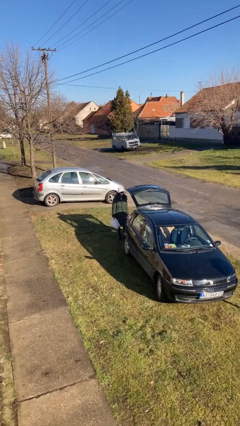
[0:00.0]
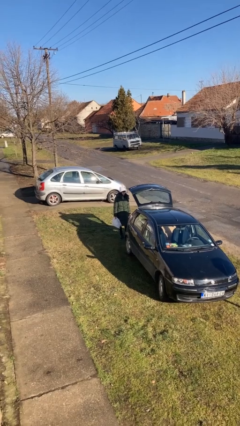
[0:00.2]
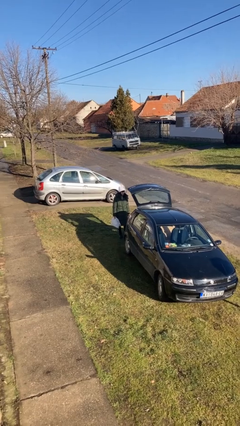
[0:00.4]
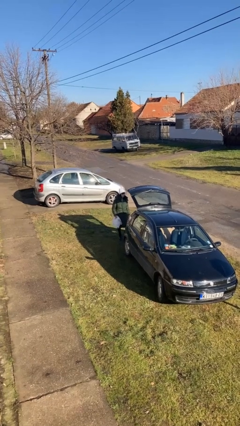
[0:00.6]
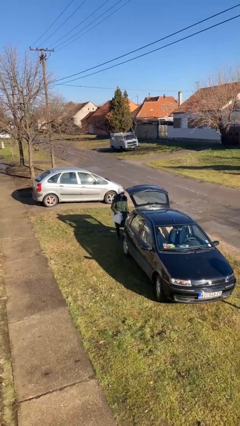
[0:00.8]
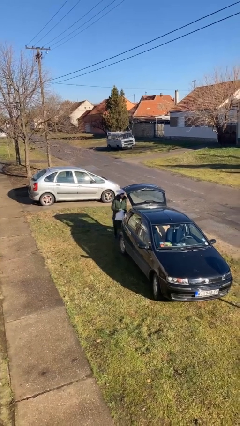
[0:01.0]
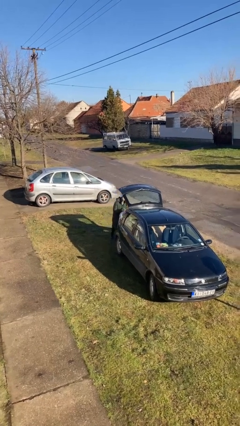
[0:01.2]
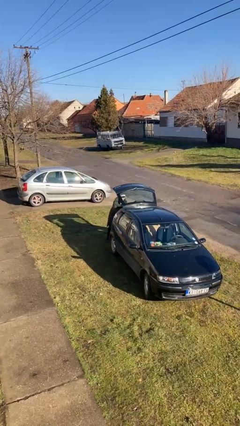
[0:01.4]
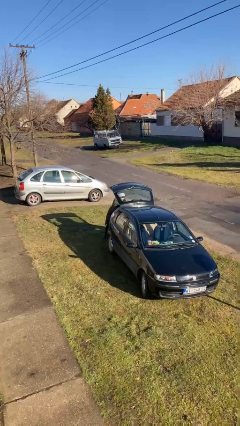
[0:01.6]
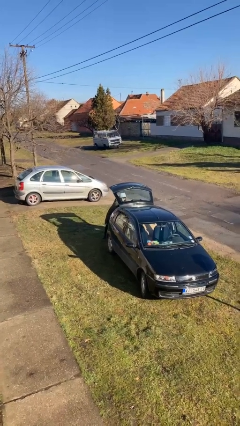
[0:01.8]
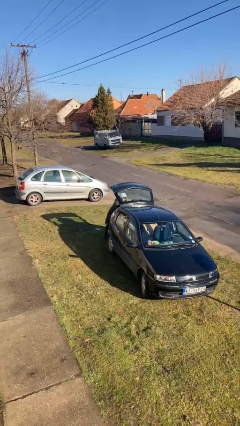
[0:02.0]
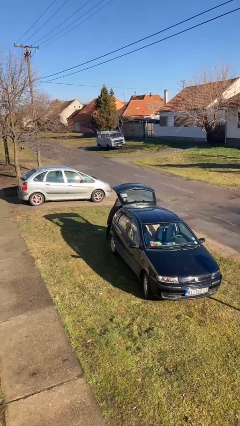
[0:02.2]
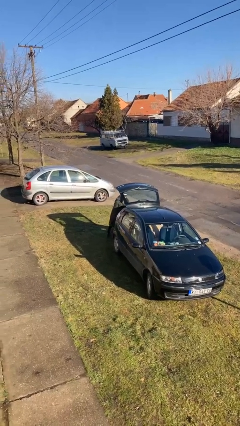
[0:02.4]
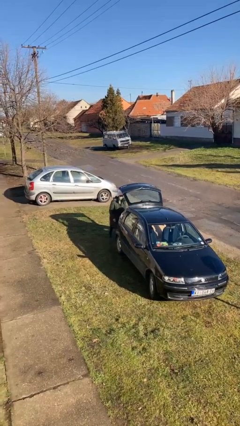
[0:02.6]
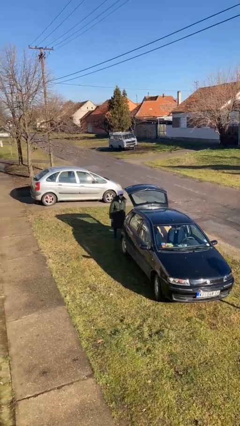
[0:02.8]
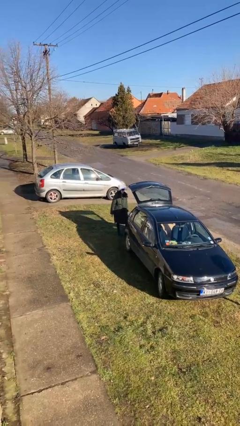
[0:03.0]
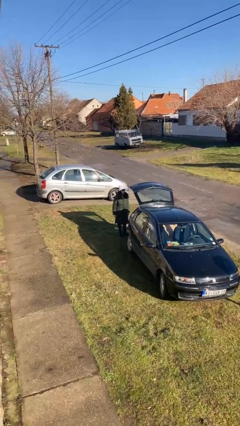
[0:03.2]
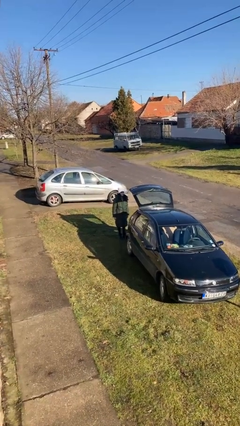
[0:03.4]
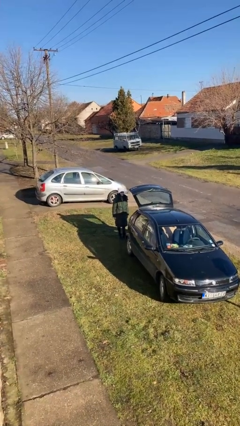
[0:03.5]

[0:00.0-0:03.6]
person loads car

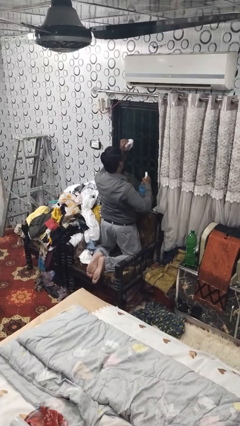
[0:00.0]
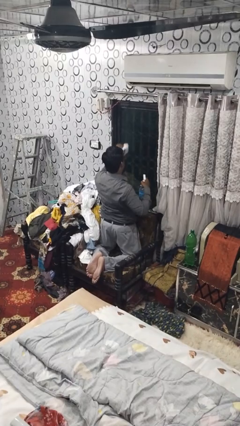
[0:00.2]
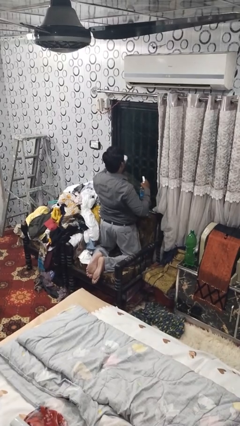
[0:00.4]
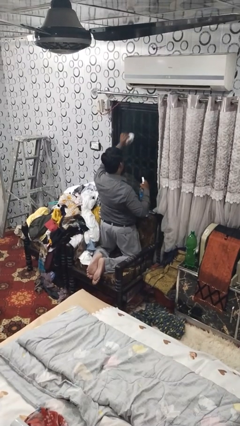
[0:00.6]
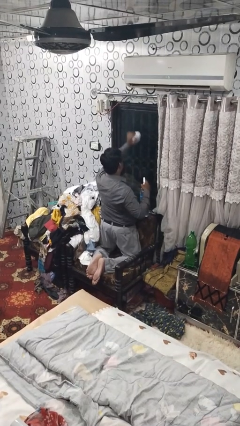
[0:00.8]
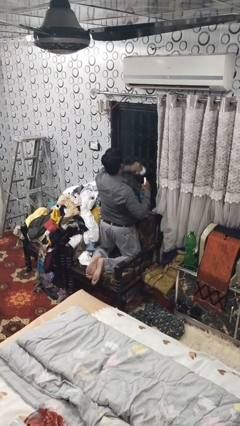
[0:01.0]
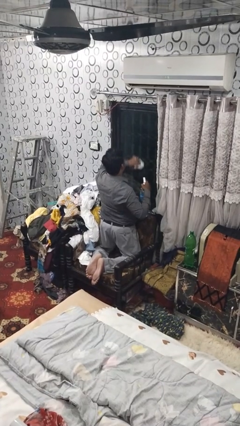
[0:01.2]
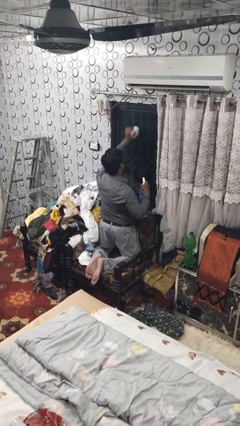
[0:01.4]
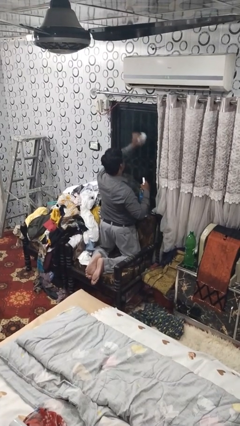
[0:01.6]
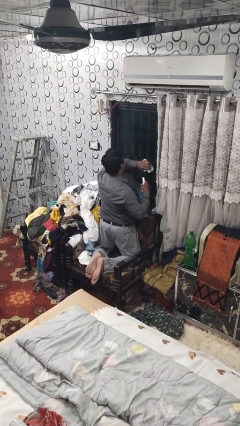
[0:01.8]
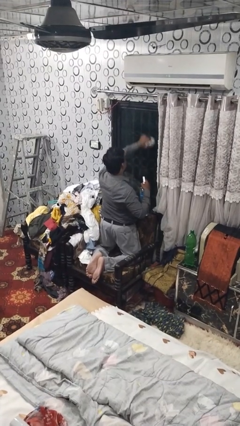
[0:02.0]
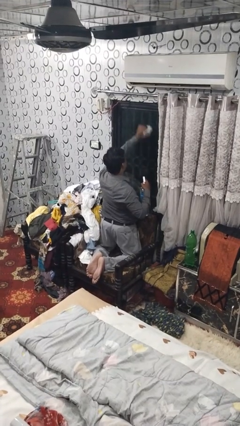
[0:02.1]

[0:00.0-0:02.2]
person washes window

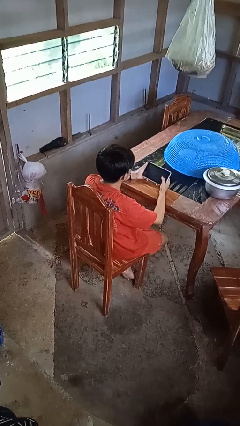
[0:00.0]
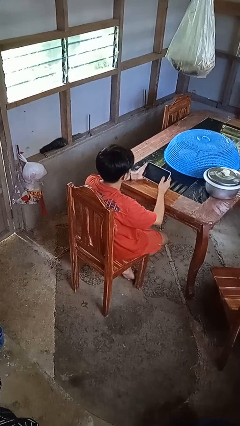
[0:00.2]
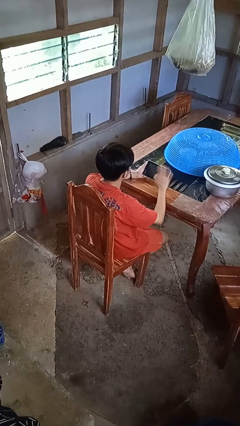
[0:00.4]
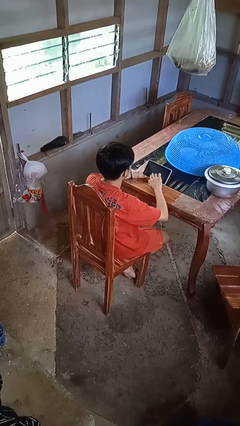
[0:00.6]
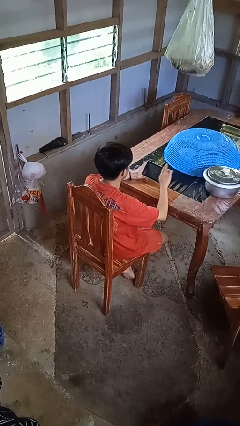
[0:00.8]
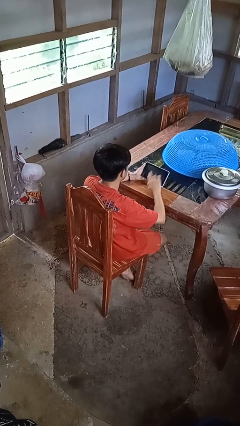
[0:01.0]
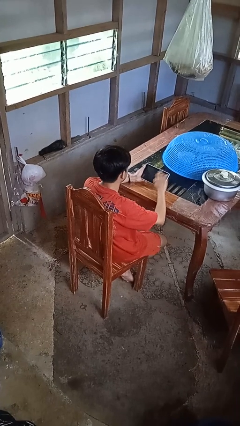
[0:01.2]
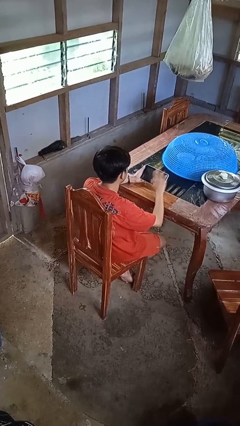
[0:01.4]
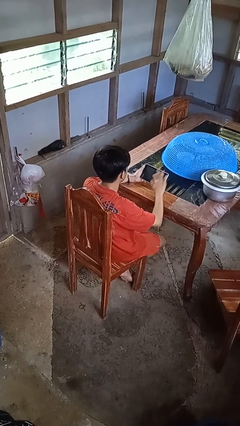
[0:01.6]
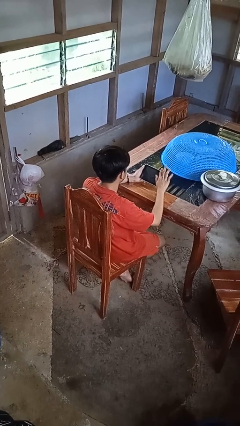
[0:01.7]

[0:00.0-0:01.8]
person interacts with tablet

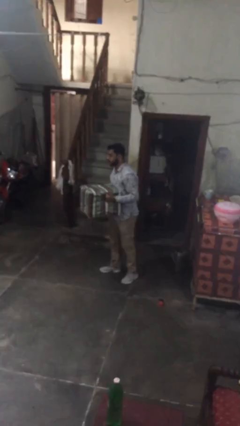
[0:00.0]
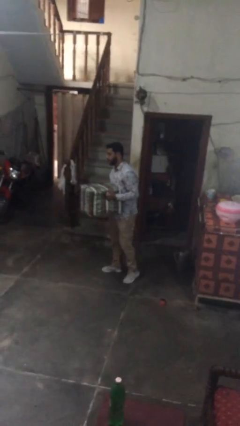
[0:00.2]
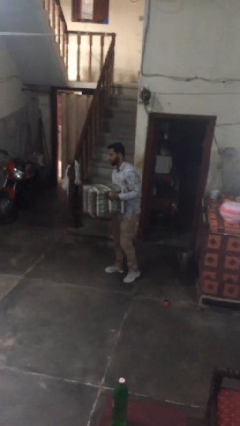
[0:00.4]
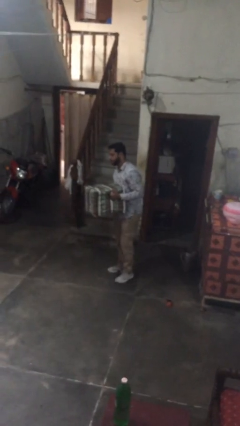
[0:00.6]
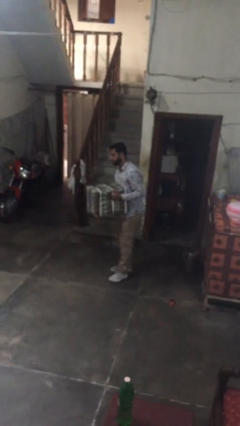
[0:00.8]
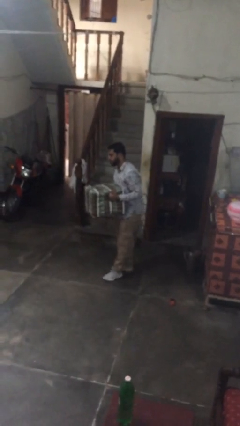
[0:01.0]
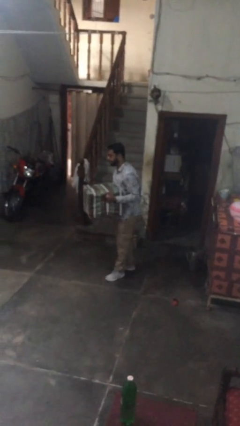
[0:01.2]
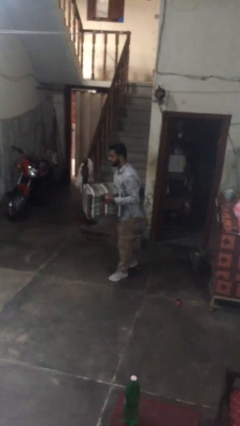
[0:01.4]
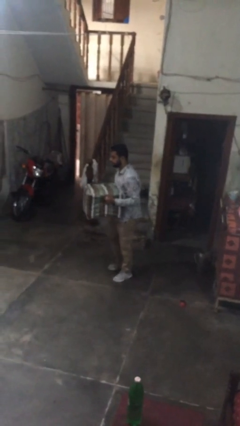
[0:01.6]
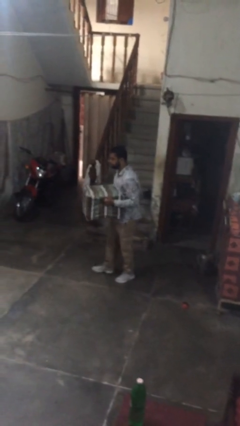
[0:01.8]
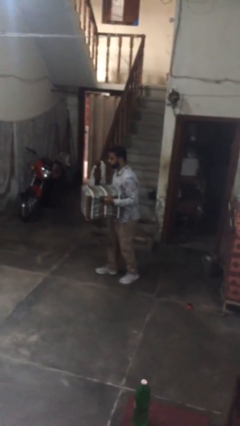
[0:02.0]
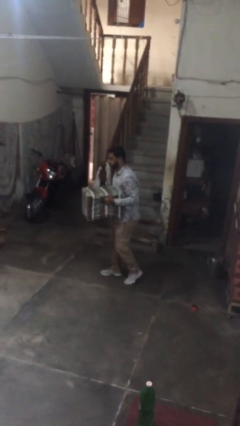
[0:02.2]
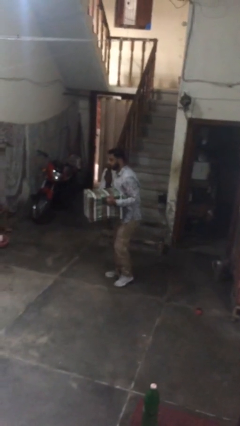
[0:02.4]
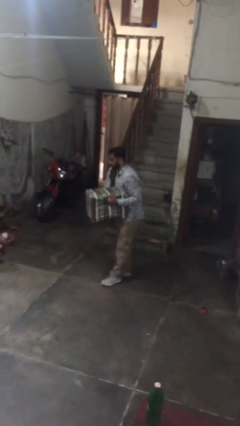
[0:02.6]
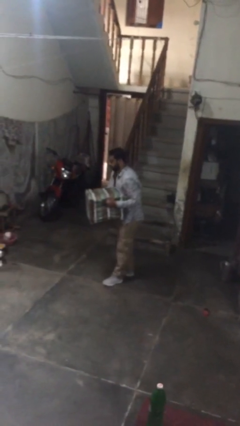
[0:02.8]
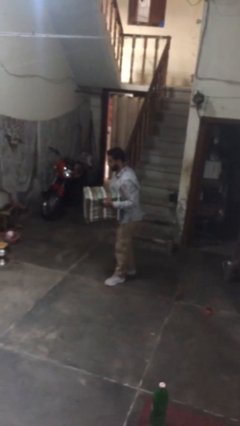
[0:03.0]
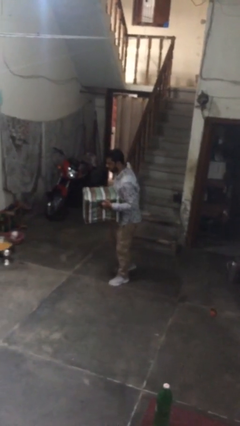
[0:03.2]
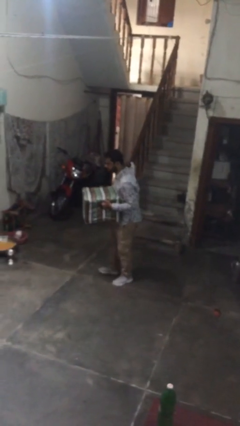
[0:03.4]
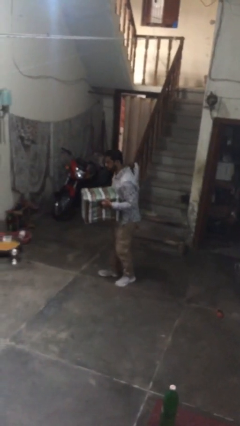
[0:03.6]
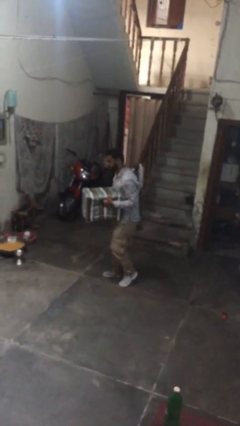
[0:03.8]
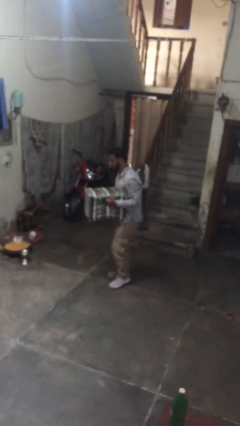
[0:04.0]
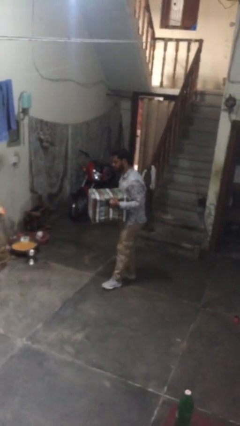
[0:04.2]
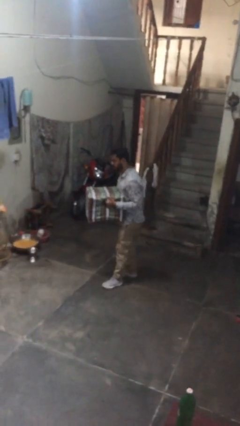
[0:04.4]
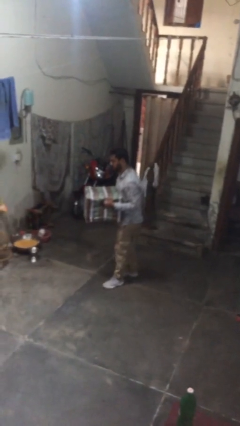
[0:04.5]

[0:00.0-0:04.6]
person carries heavy object

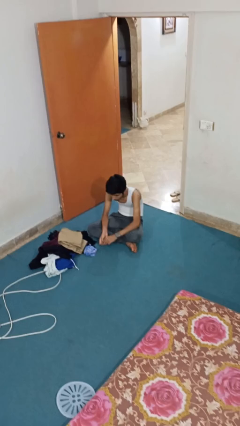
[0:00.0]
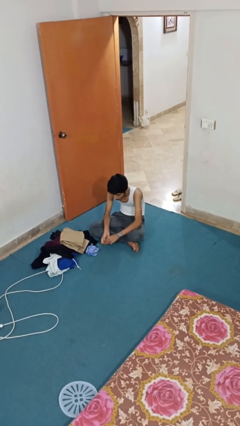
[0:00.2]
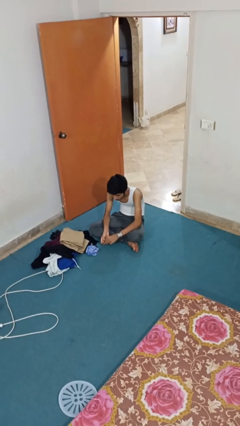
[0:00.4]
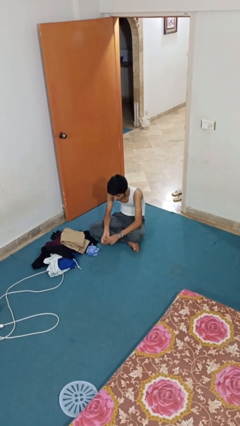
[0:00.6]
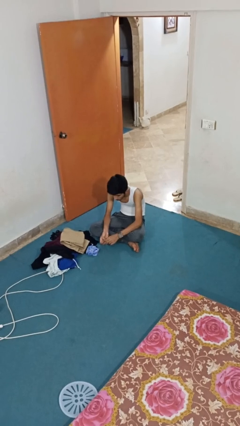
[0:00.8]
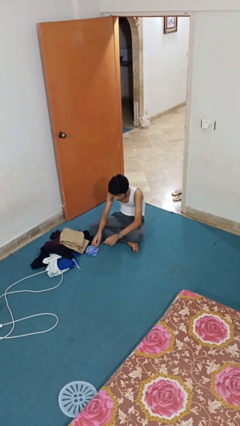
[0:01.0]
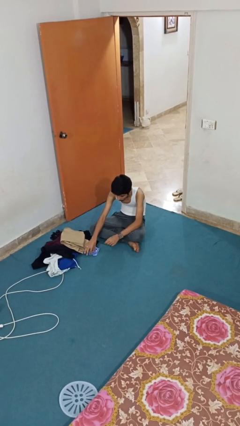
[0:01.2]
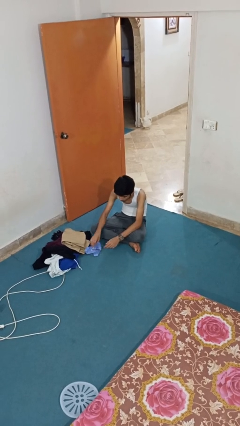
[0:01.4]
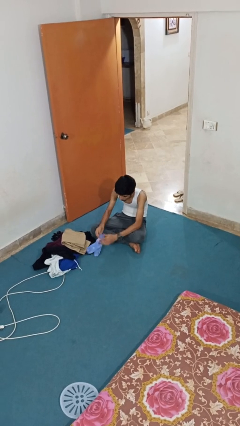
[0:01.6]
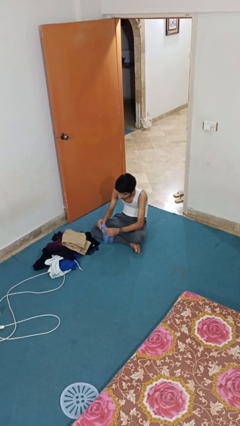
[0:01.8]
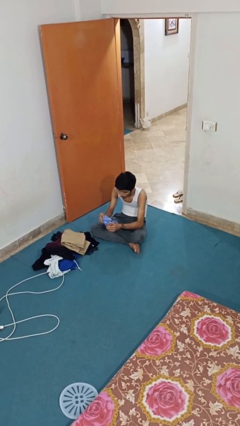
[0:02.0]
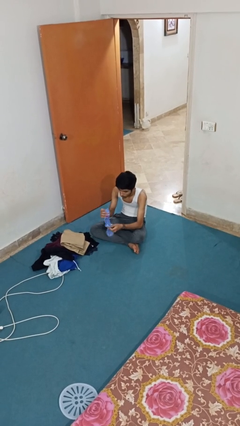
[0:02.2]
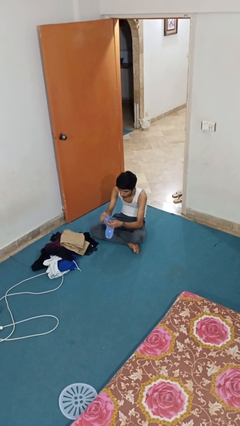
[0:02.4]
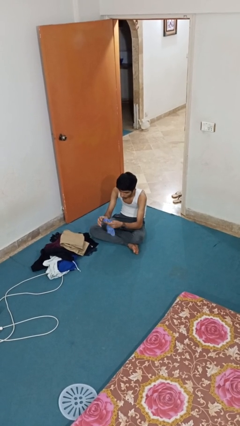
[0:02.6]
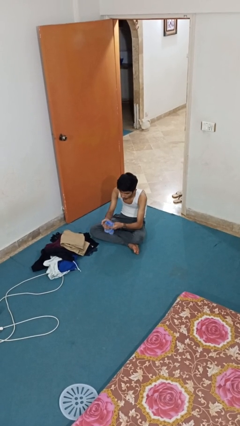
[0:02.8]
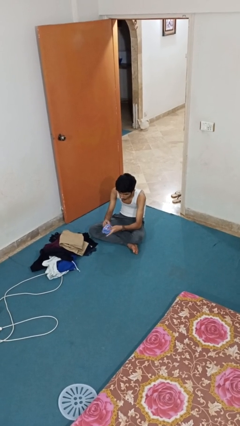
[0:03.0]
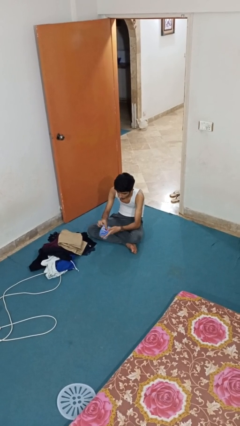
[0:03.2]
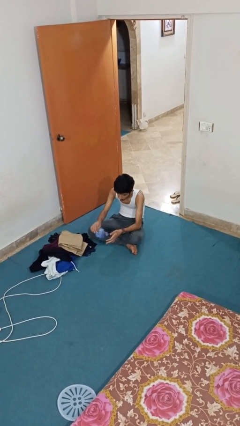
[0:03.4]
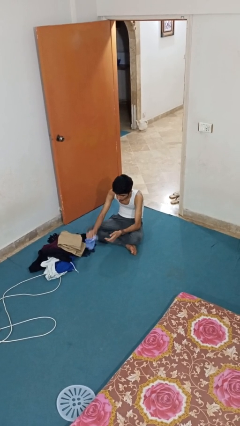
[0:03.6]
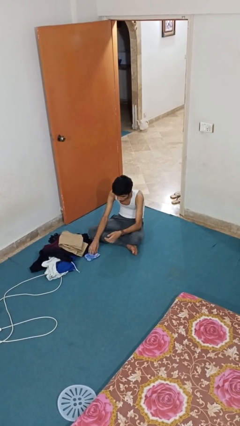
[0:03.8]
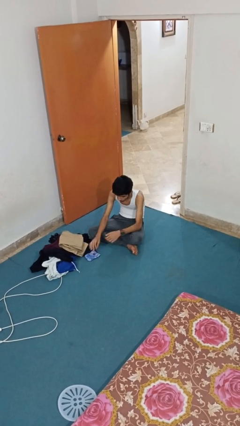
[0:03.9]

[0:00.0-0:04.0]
person folds socks

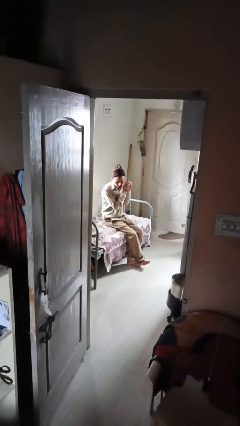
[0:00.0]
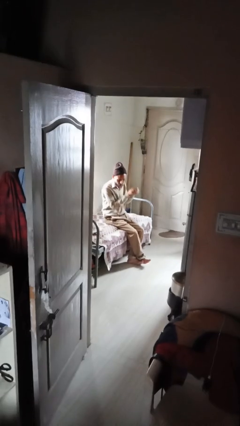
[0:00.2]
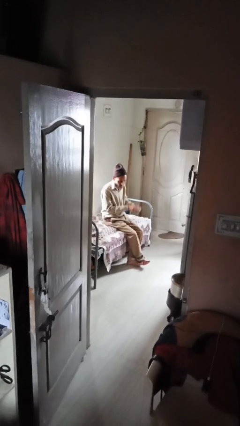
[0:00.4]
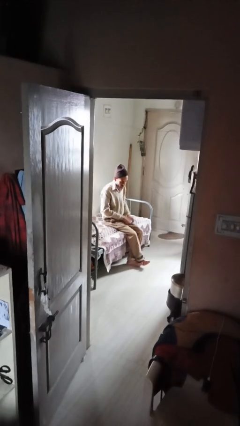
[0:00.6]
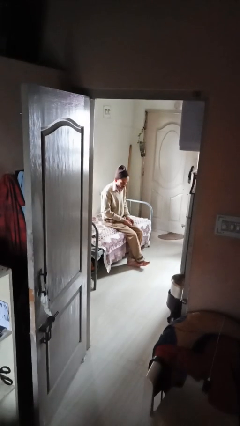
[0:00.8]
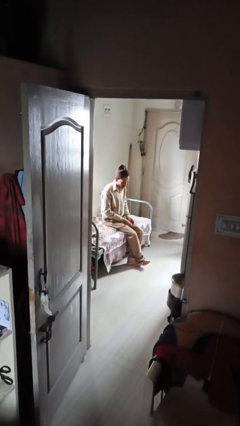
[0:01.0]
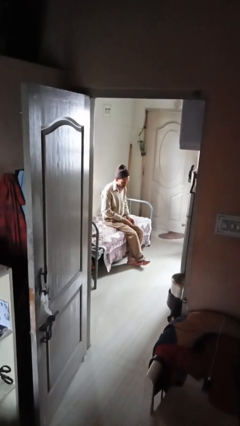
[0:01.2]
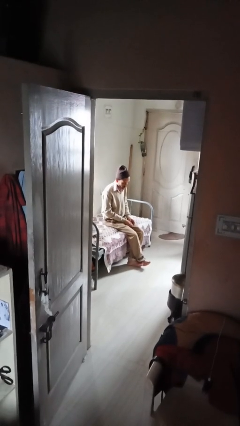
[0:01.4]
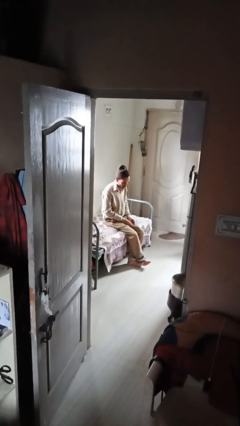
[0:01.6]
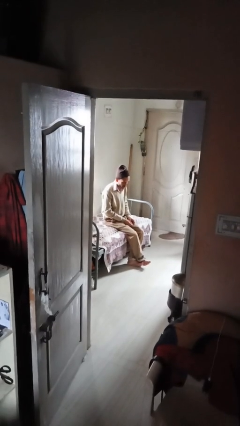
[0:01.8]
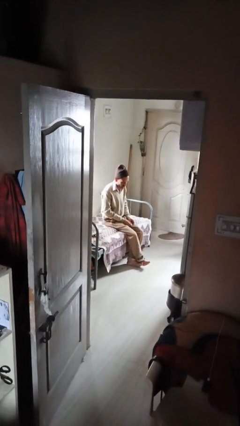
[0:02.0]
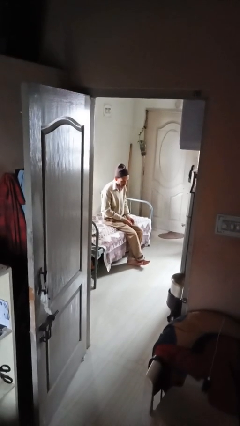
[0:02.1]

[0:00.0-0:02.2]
person takes off earrings
